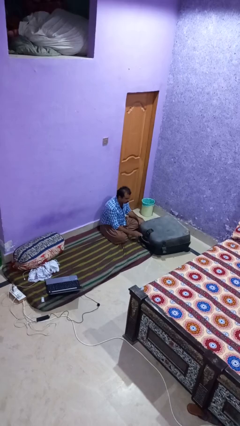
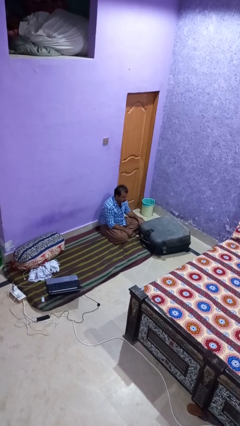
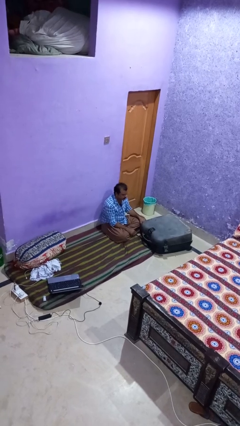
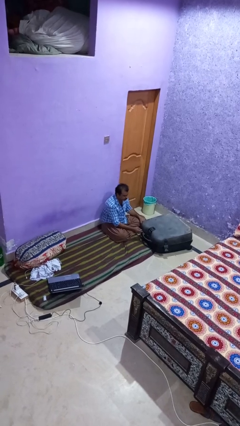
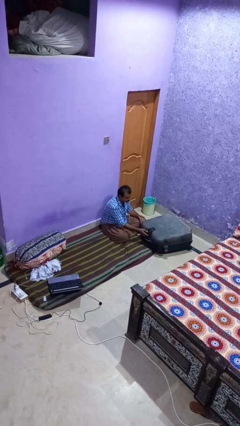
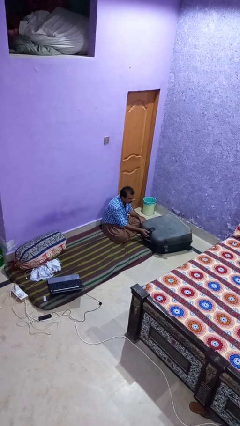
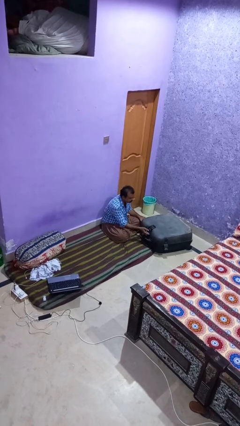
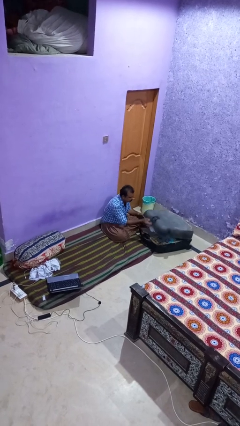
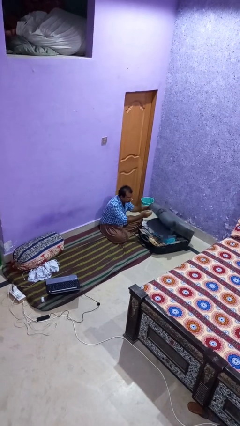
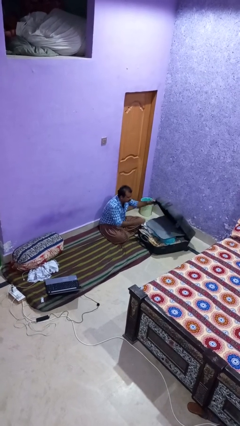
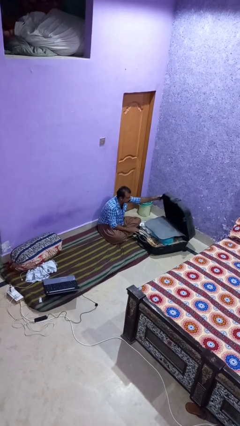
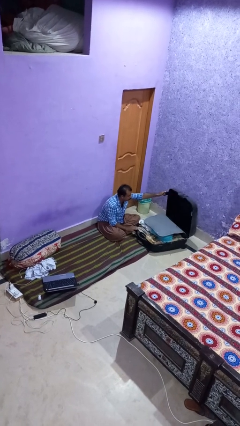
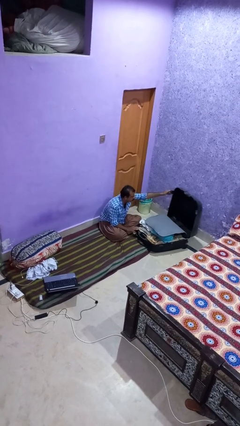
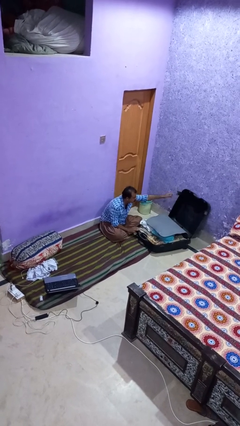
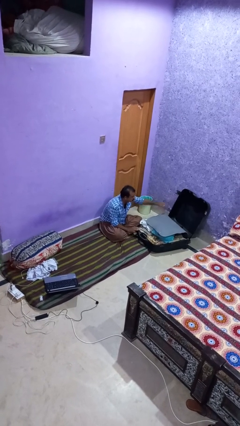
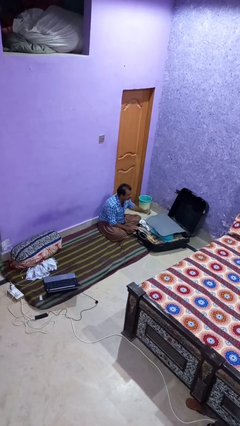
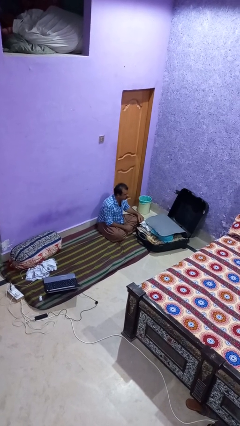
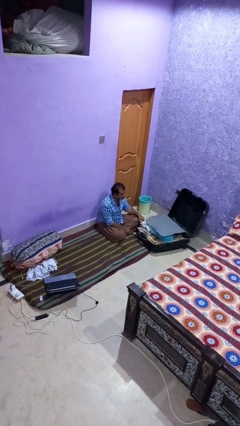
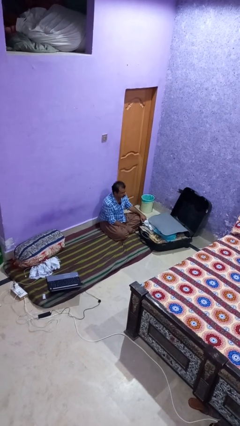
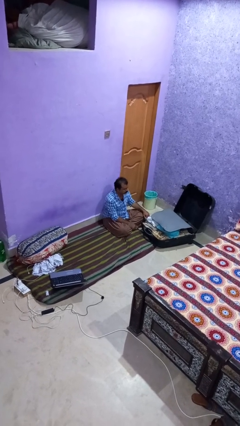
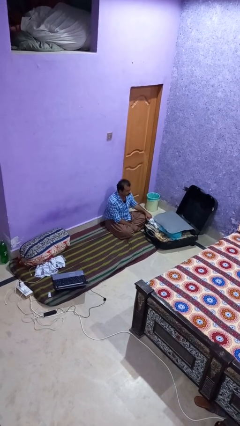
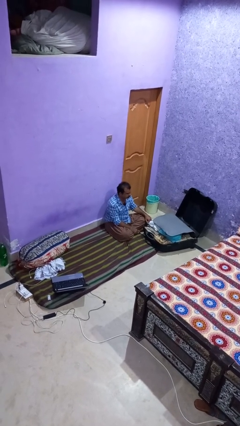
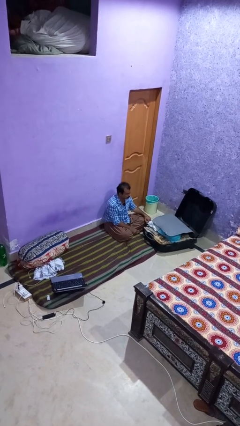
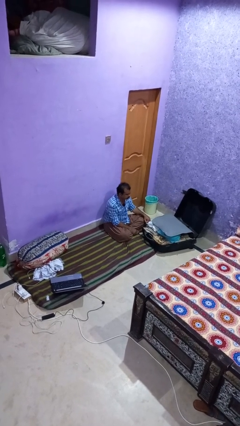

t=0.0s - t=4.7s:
person opens suitcase

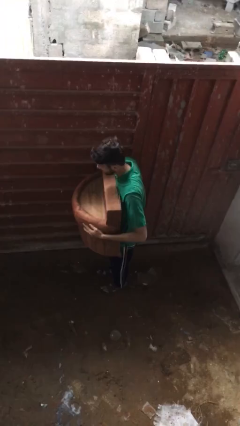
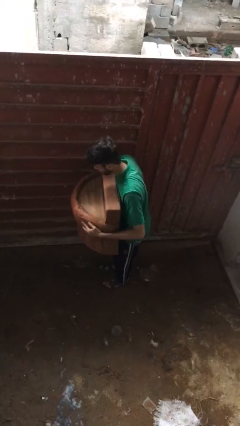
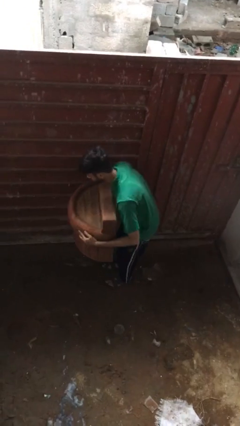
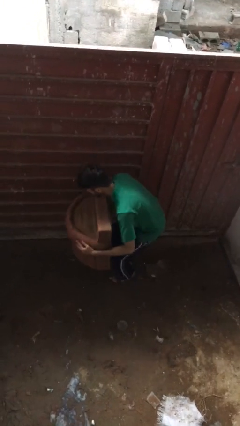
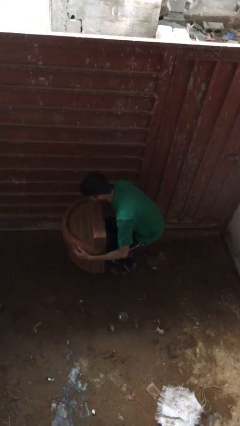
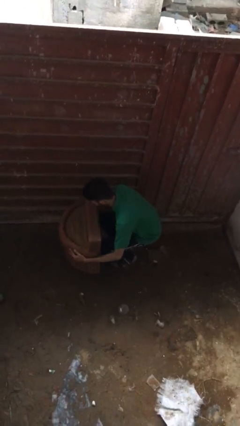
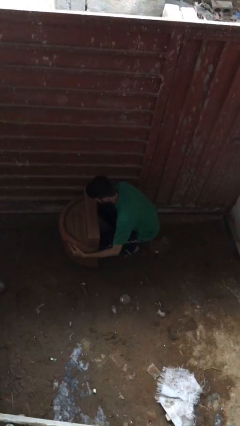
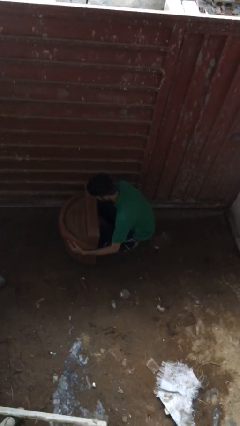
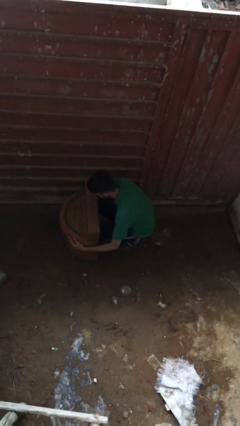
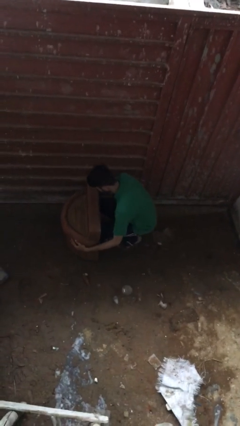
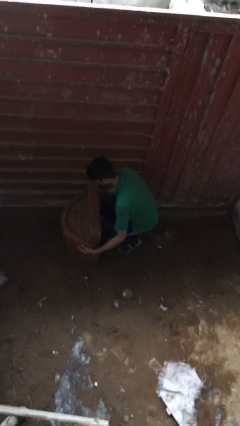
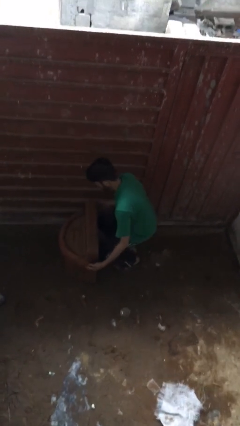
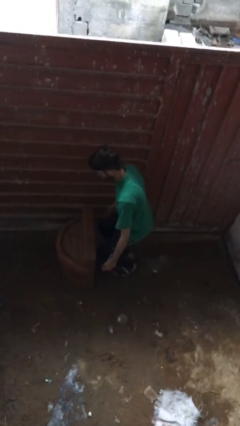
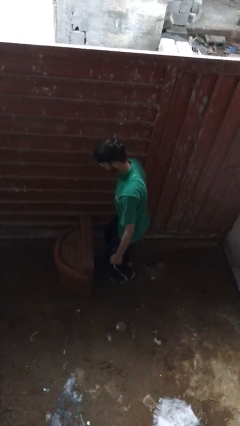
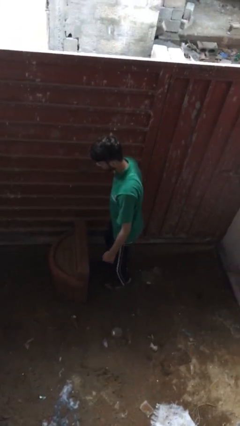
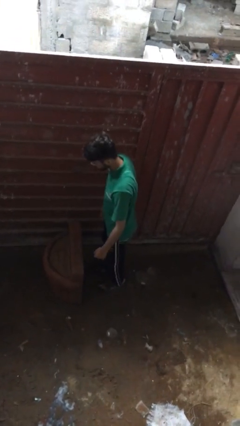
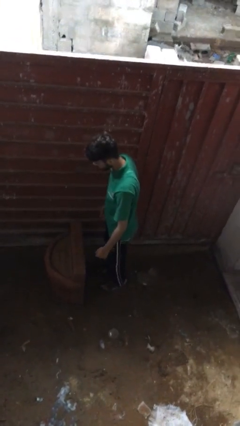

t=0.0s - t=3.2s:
person puts down object on floor

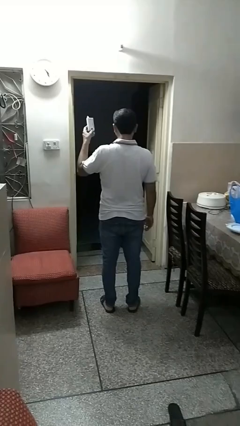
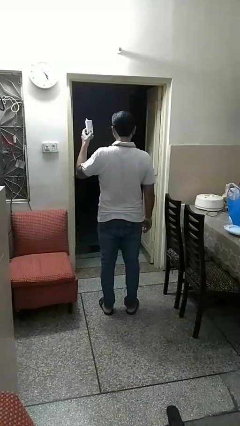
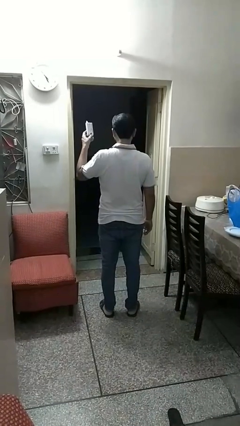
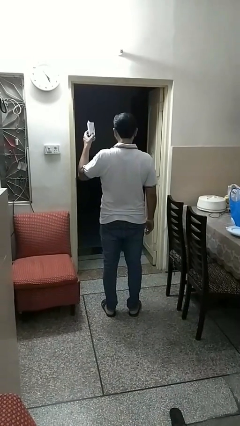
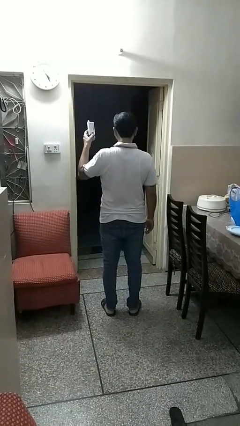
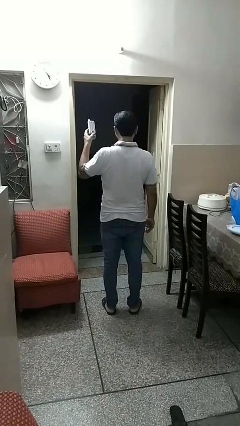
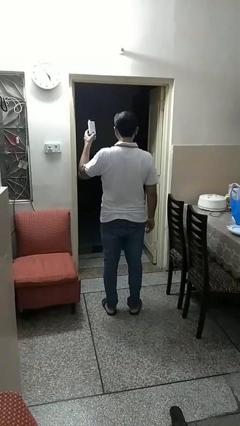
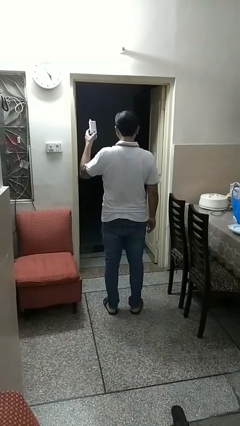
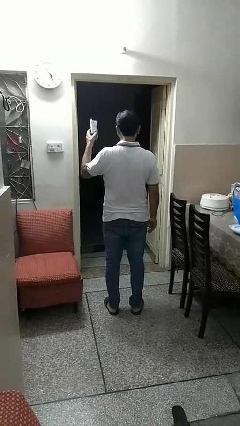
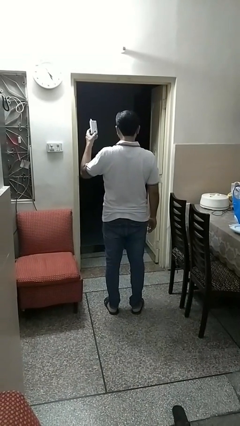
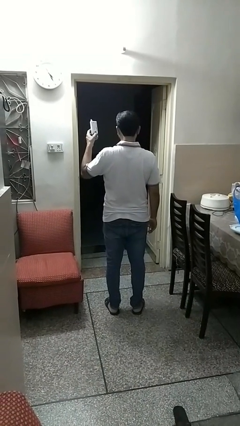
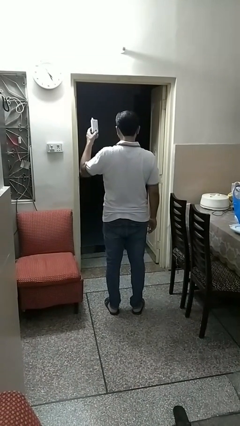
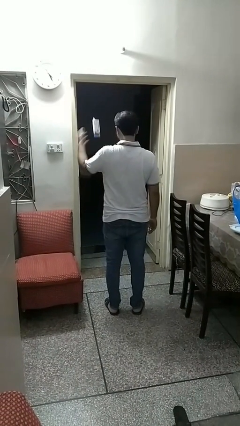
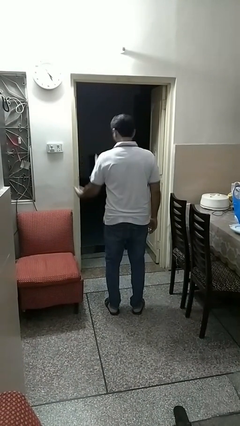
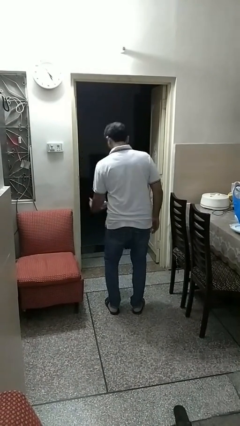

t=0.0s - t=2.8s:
person drops object

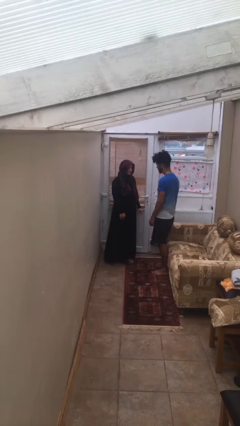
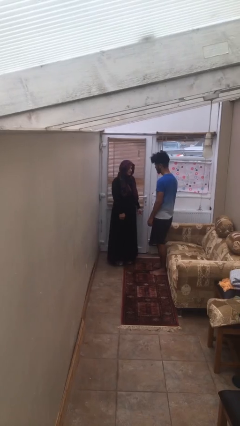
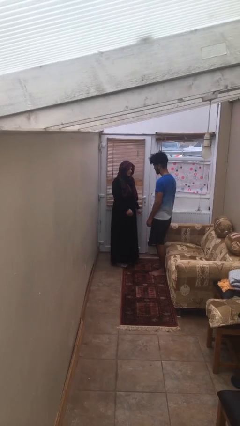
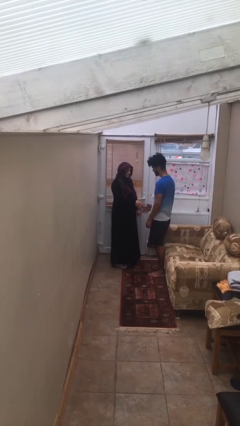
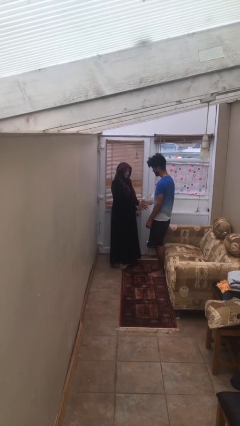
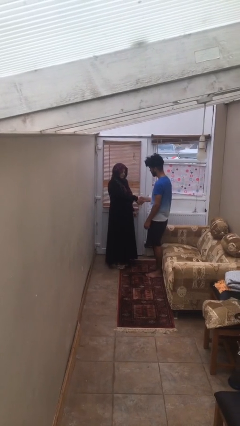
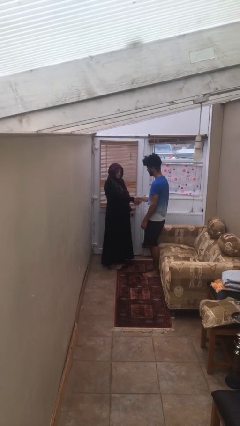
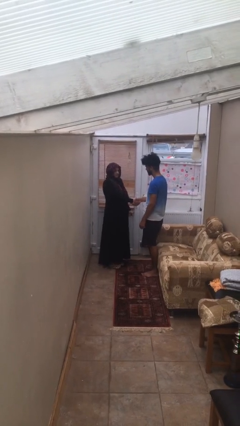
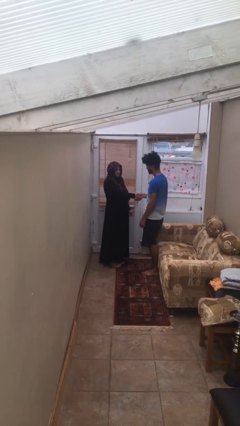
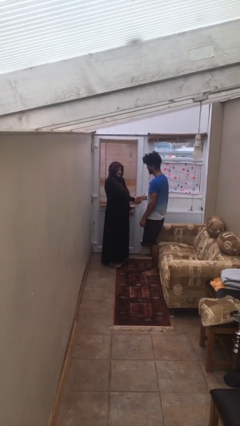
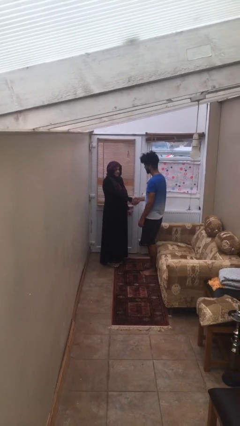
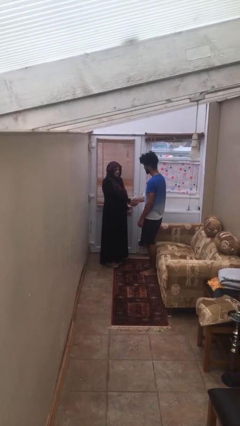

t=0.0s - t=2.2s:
person shakes hand

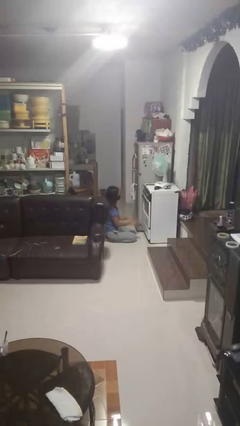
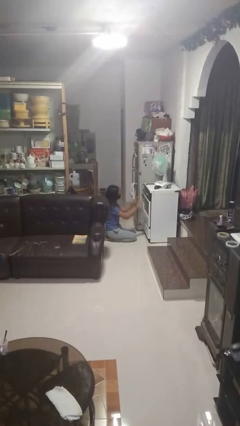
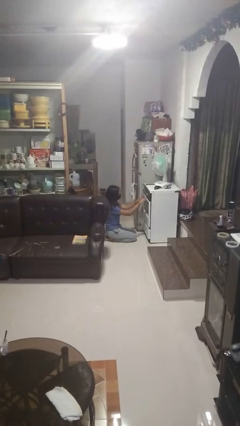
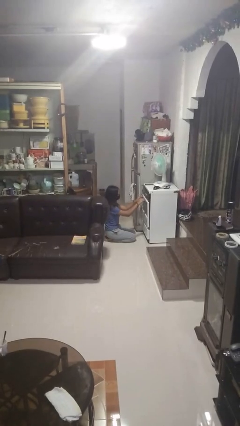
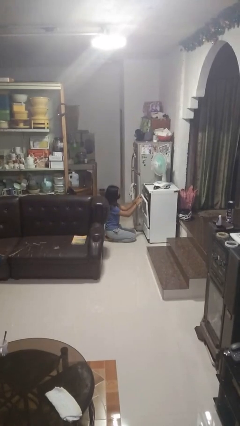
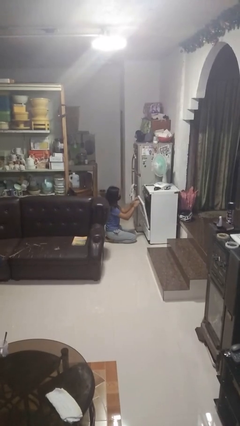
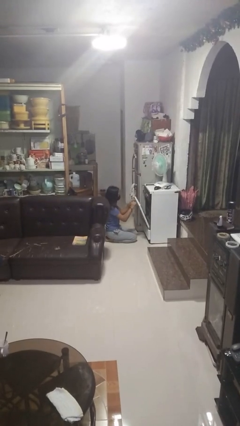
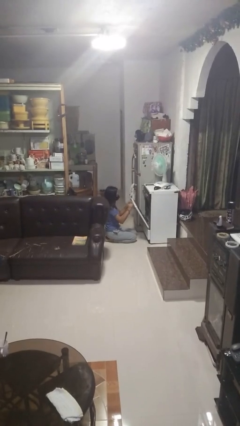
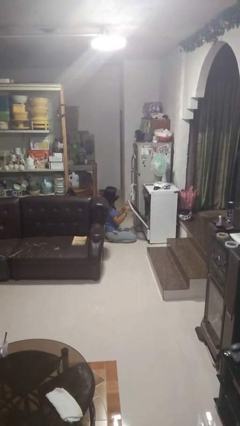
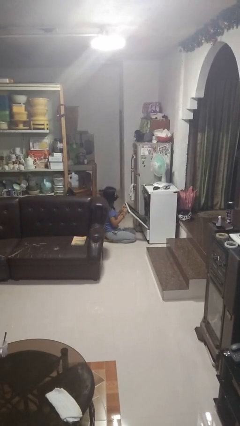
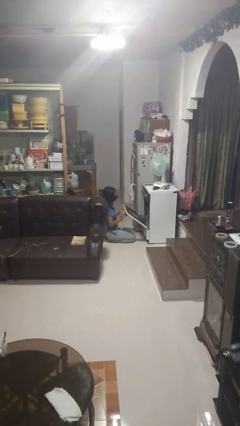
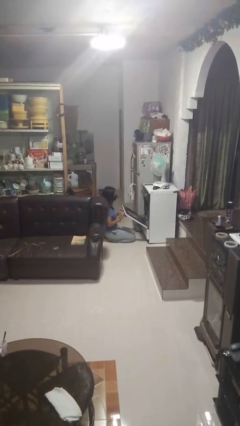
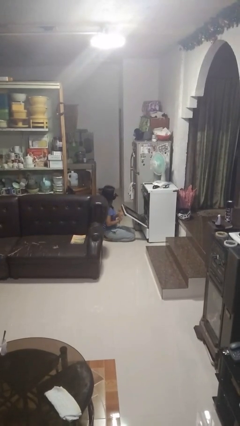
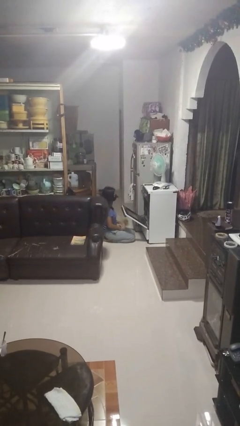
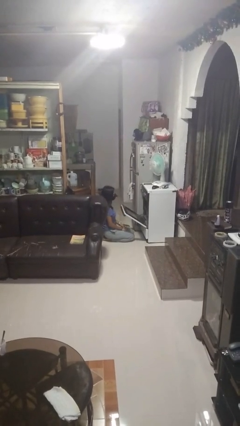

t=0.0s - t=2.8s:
person opens oven door

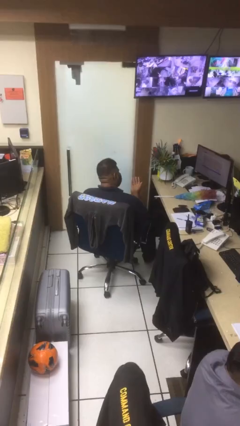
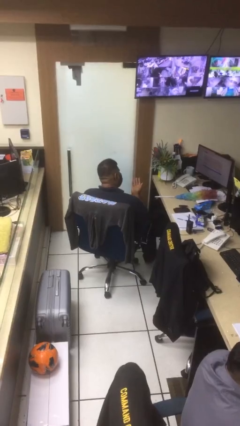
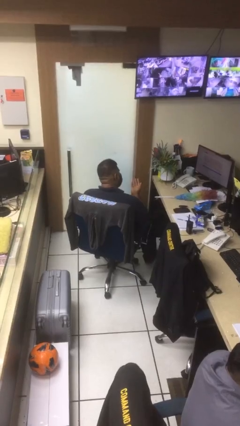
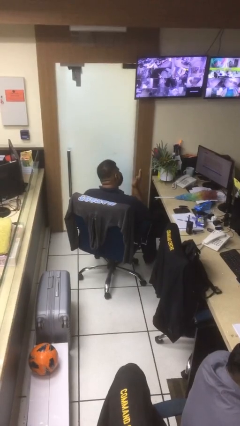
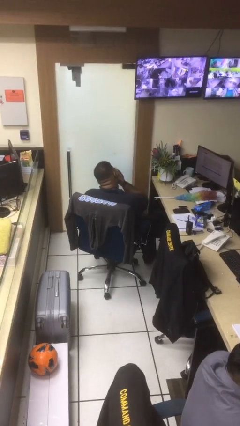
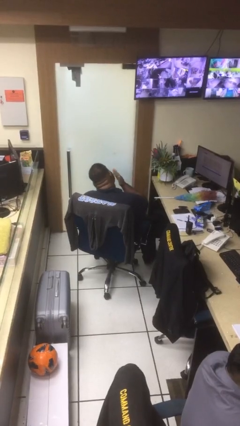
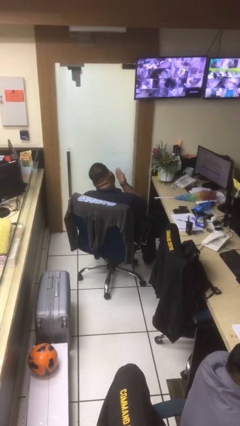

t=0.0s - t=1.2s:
person swats bug

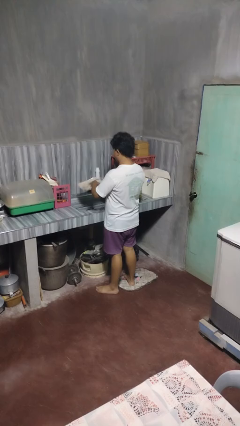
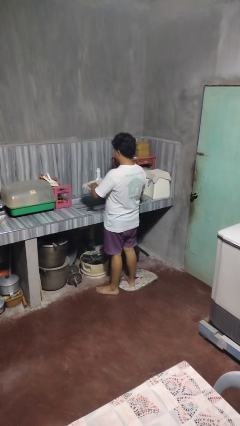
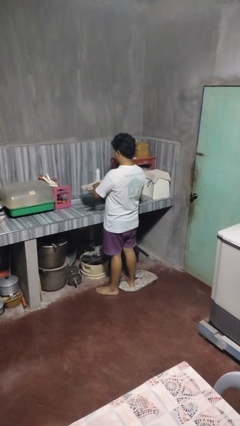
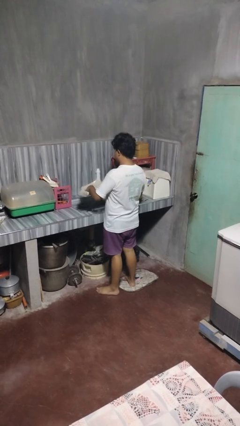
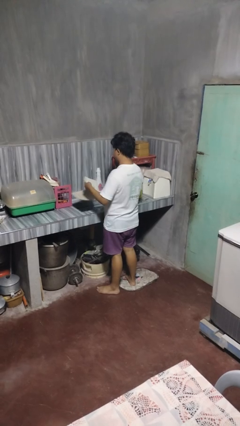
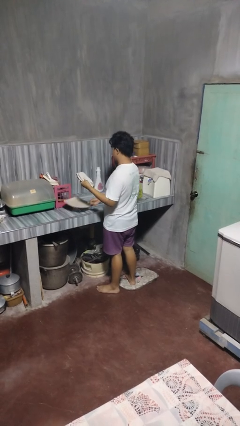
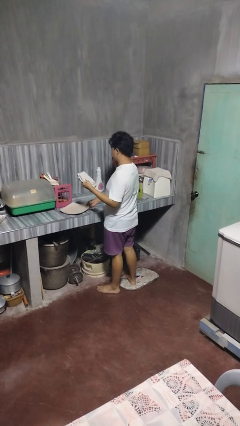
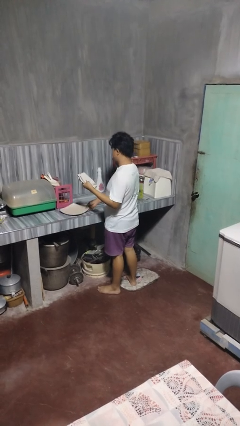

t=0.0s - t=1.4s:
person dries dish
